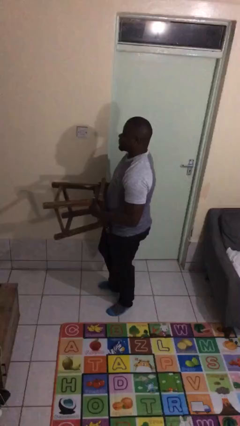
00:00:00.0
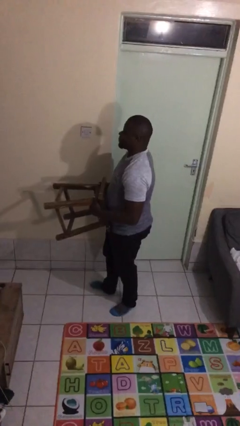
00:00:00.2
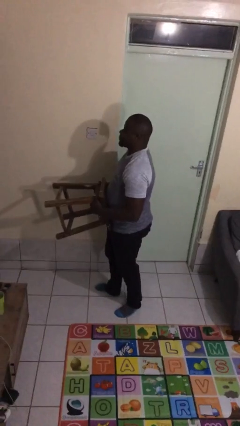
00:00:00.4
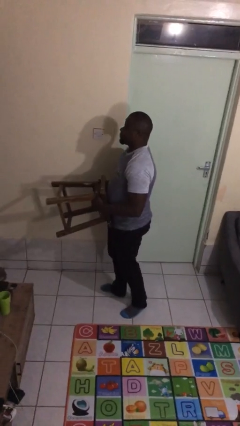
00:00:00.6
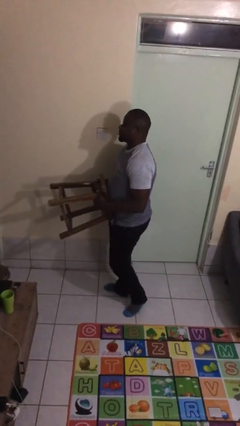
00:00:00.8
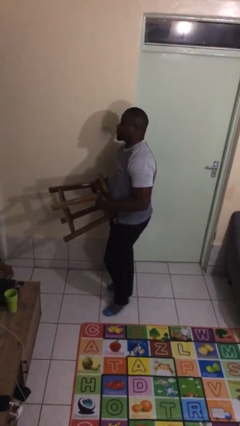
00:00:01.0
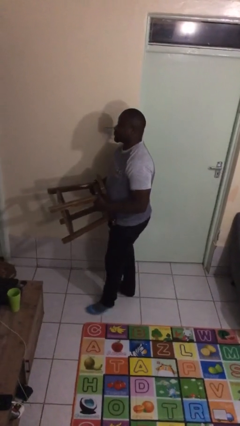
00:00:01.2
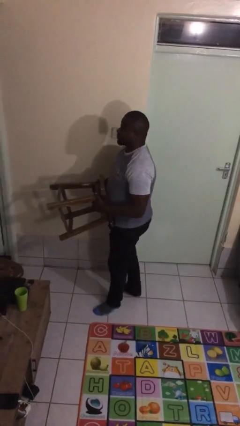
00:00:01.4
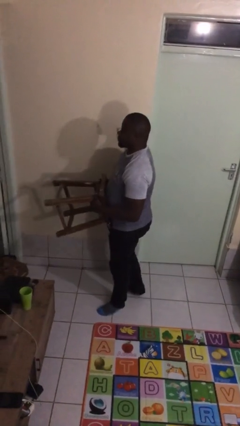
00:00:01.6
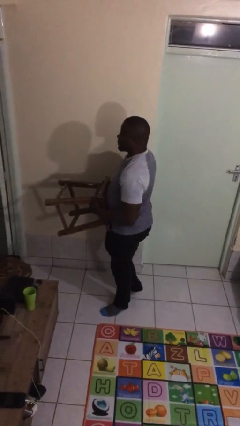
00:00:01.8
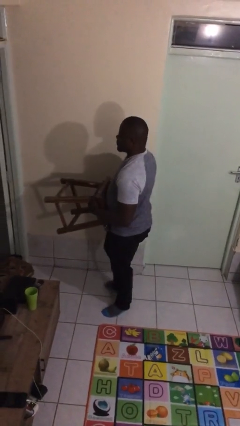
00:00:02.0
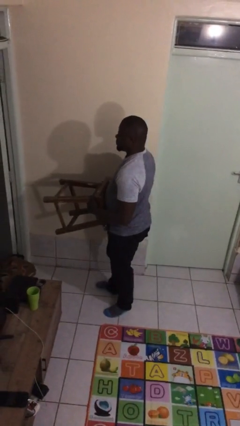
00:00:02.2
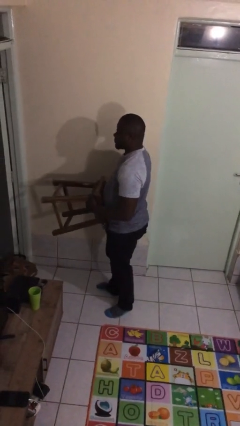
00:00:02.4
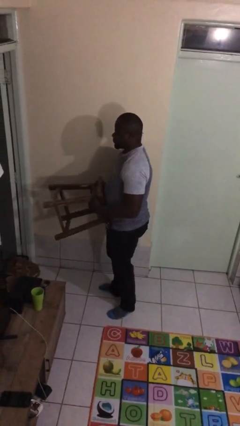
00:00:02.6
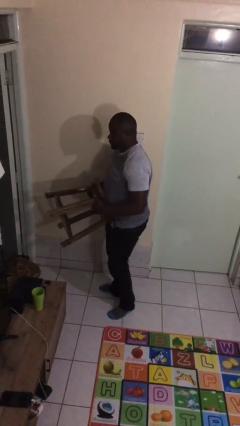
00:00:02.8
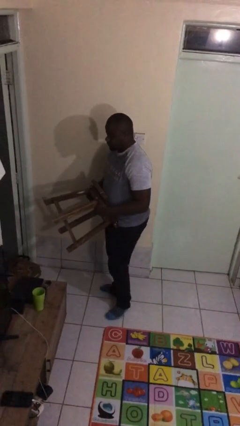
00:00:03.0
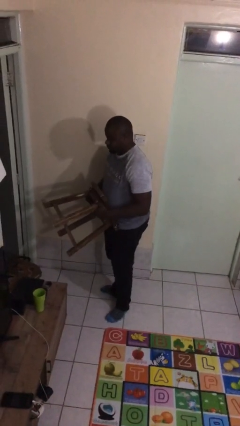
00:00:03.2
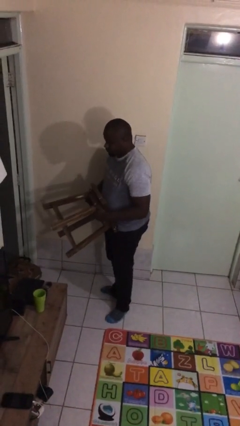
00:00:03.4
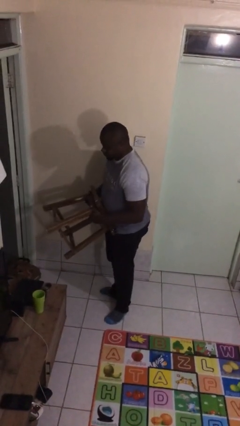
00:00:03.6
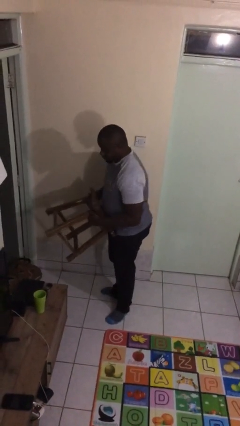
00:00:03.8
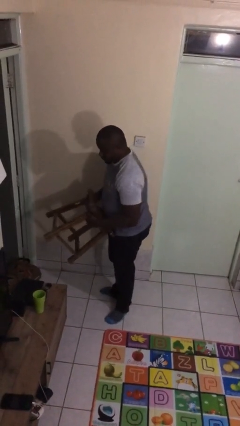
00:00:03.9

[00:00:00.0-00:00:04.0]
person carries furniture

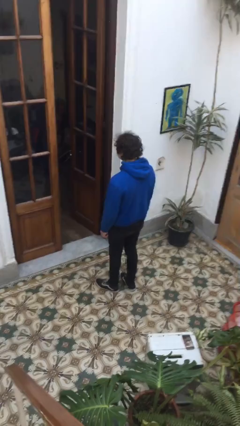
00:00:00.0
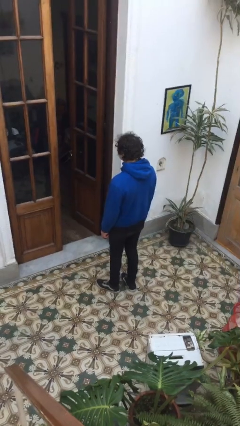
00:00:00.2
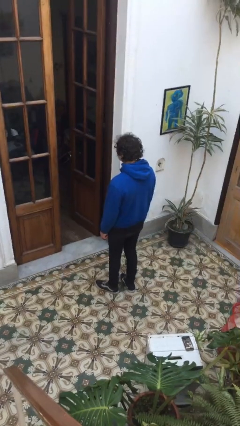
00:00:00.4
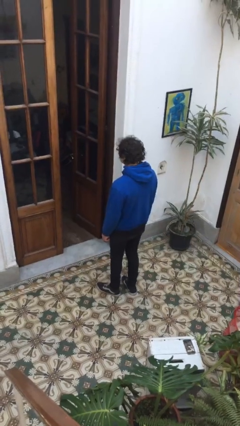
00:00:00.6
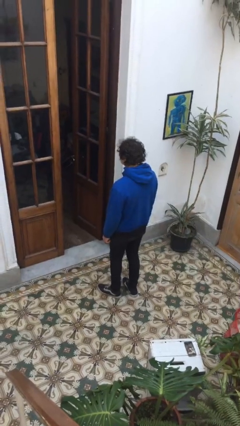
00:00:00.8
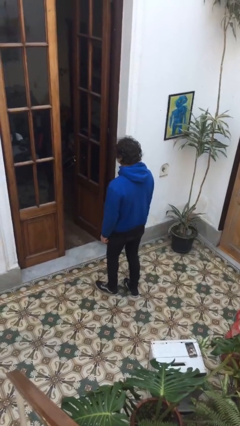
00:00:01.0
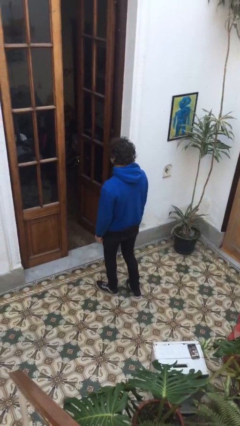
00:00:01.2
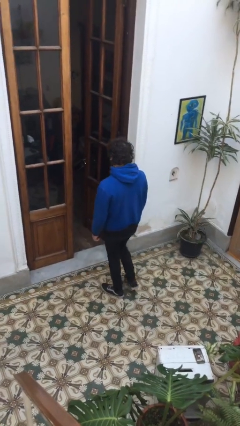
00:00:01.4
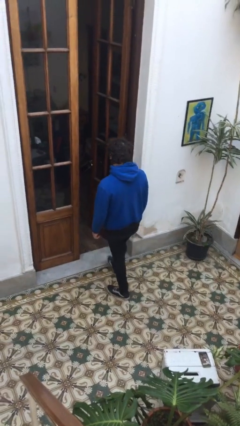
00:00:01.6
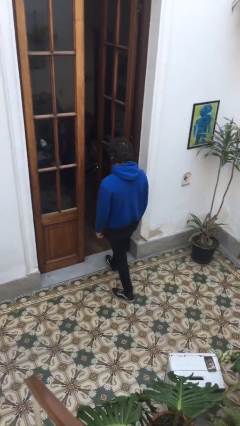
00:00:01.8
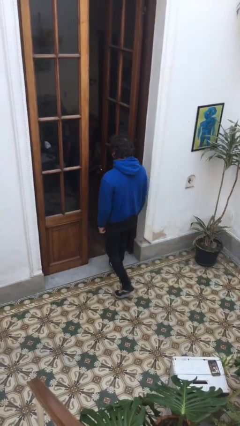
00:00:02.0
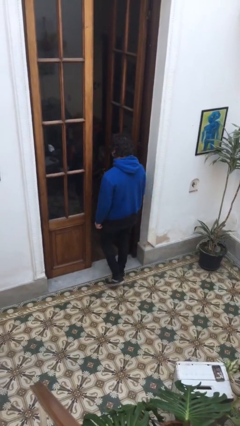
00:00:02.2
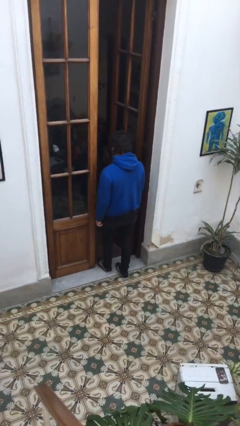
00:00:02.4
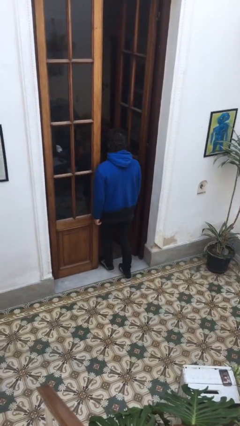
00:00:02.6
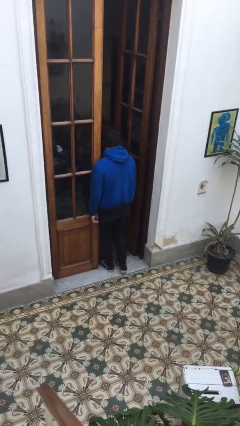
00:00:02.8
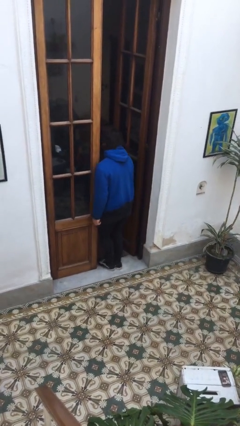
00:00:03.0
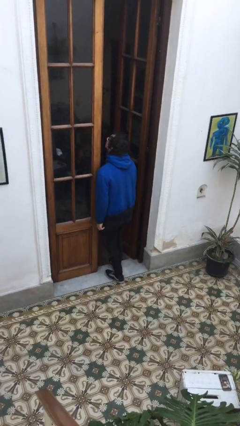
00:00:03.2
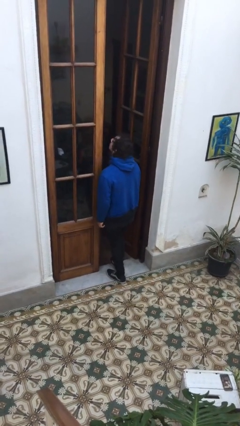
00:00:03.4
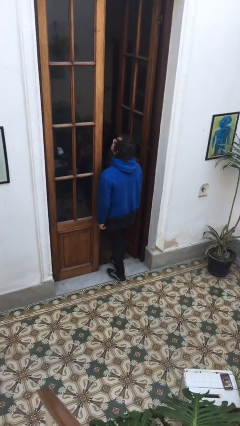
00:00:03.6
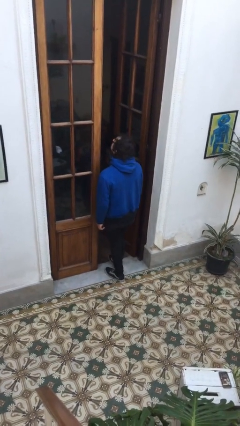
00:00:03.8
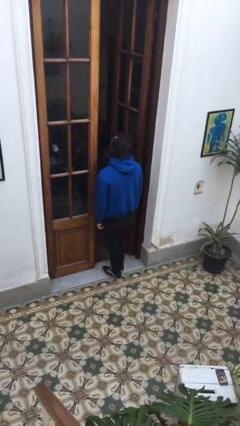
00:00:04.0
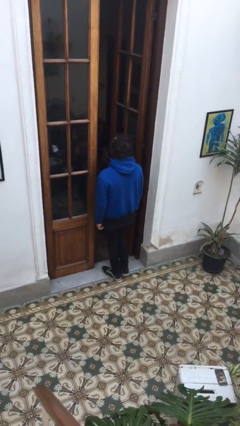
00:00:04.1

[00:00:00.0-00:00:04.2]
person bumps into wall

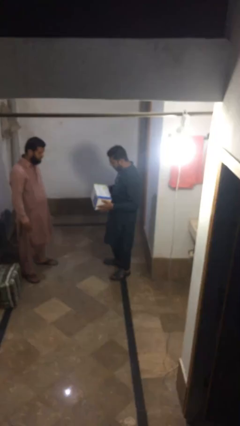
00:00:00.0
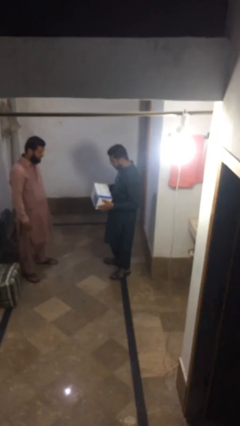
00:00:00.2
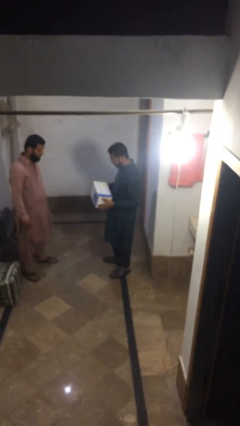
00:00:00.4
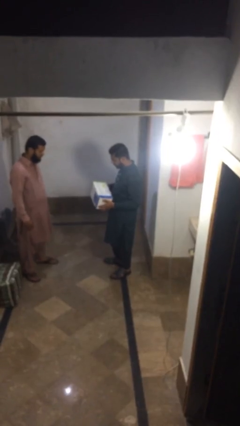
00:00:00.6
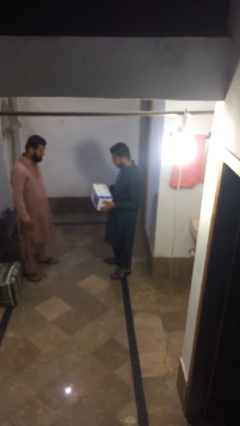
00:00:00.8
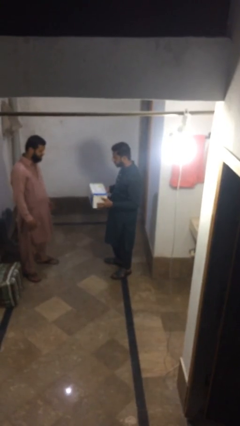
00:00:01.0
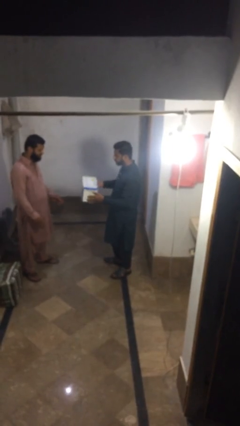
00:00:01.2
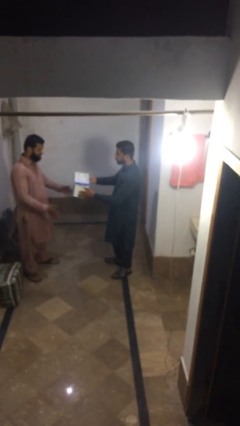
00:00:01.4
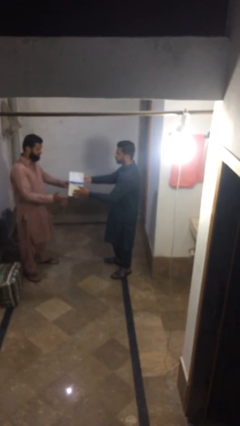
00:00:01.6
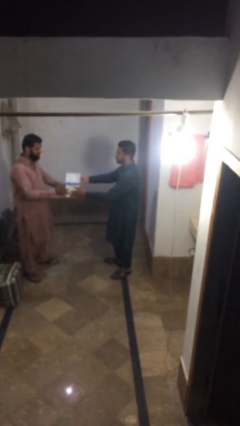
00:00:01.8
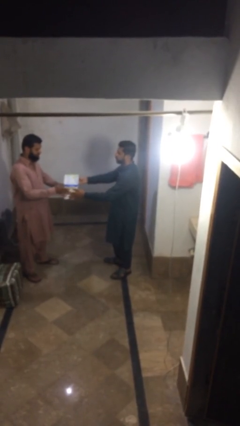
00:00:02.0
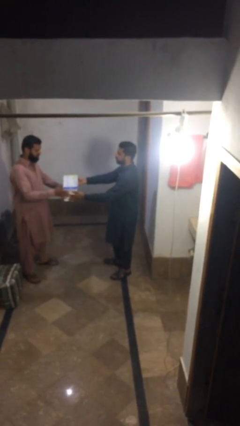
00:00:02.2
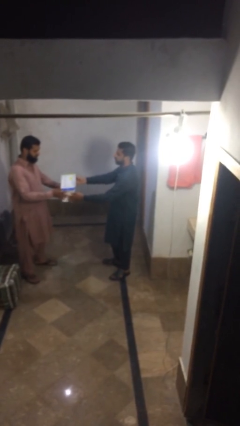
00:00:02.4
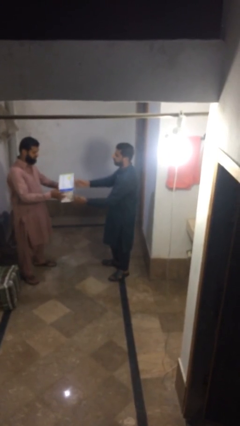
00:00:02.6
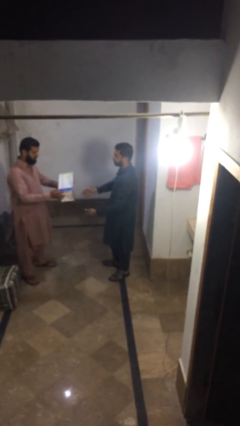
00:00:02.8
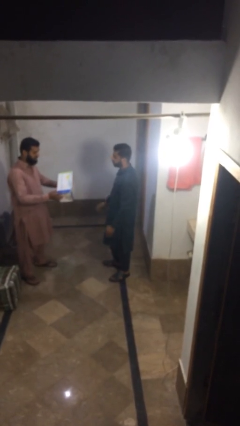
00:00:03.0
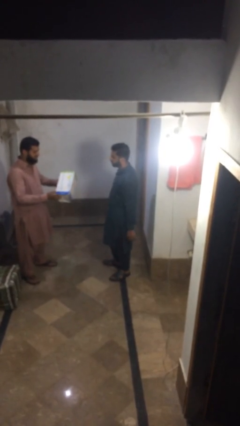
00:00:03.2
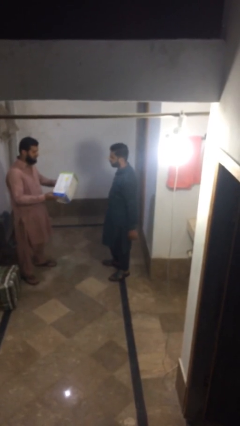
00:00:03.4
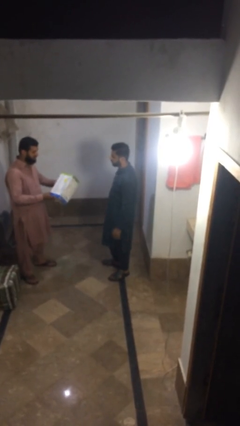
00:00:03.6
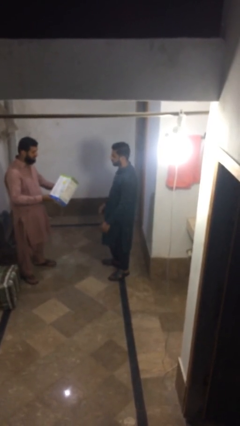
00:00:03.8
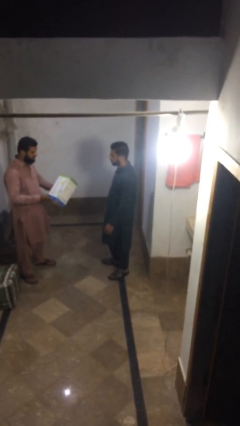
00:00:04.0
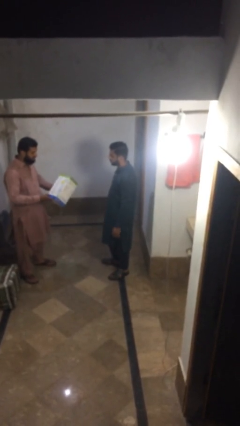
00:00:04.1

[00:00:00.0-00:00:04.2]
person transfers object to person

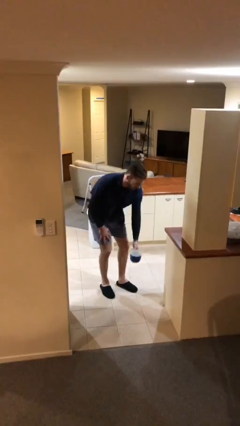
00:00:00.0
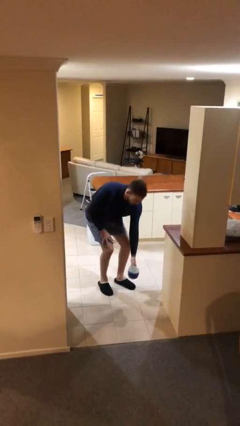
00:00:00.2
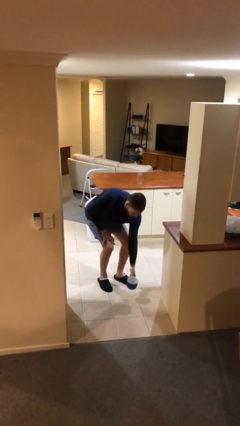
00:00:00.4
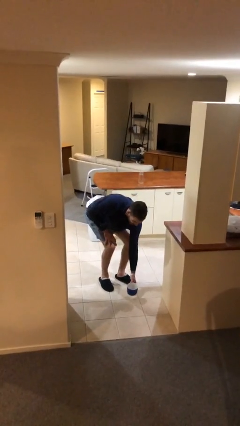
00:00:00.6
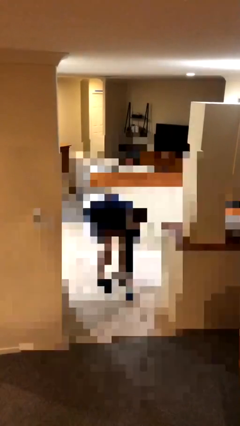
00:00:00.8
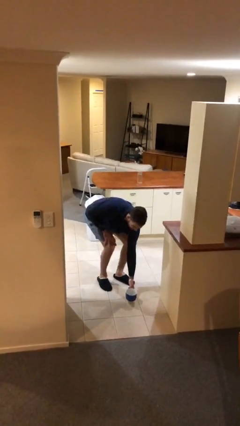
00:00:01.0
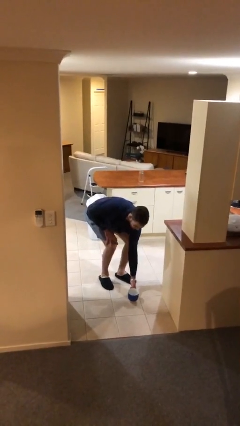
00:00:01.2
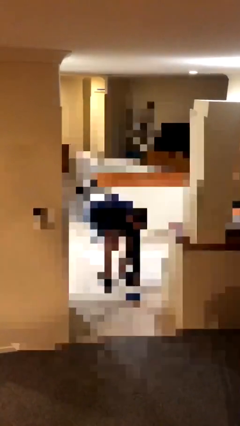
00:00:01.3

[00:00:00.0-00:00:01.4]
person puts down object on floor

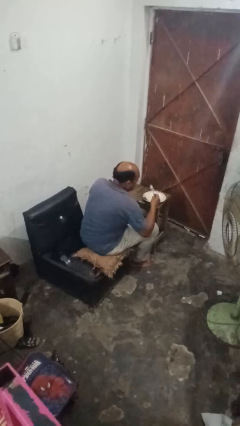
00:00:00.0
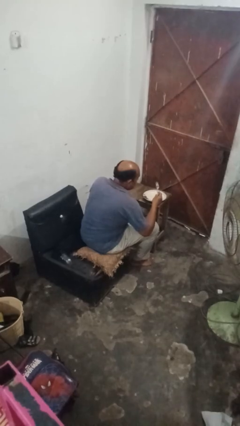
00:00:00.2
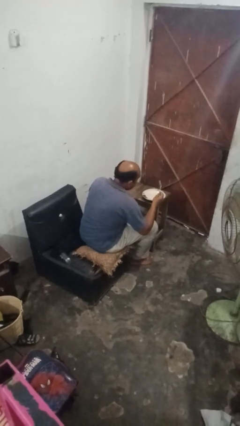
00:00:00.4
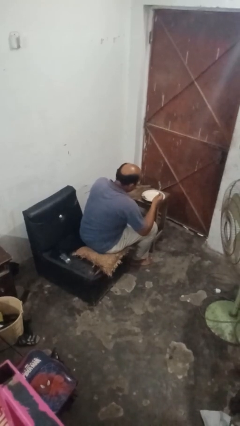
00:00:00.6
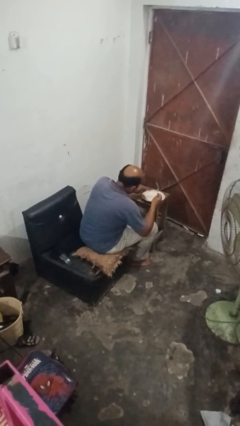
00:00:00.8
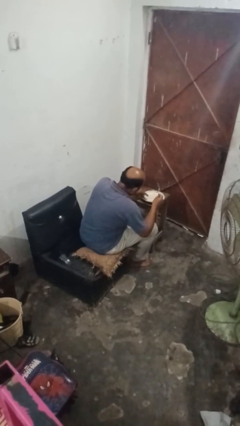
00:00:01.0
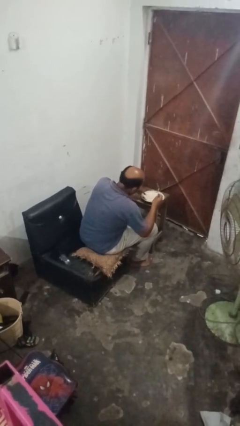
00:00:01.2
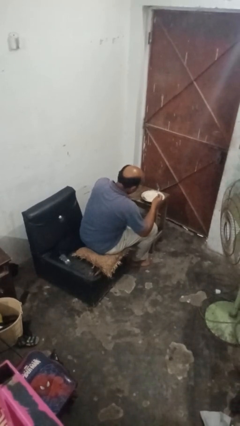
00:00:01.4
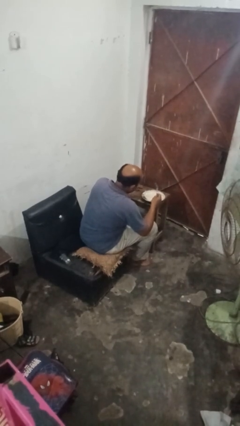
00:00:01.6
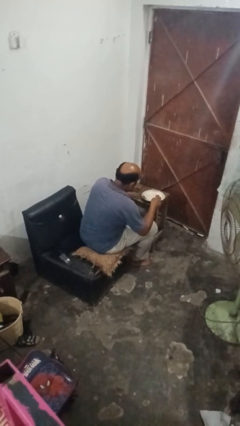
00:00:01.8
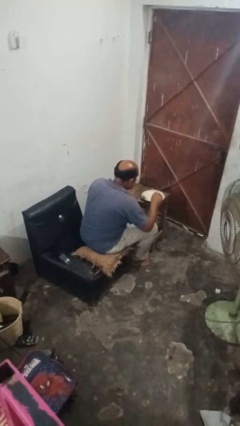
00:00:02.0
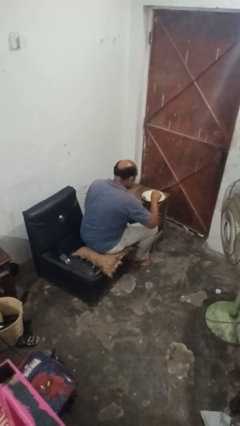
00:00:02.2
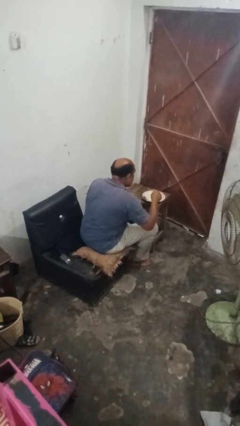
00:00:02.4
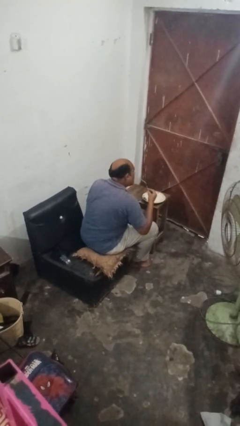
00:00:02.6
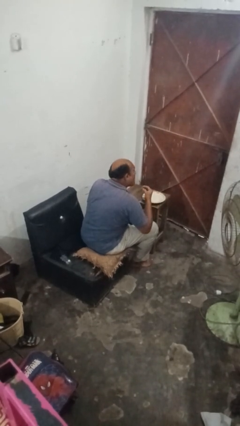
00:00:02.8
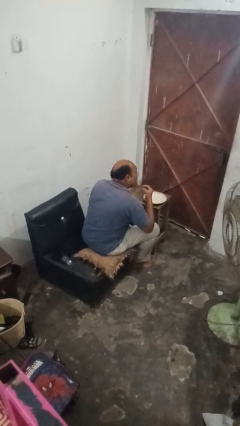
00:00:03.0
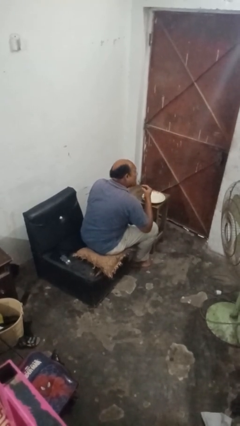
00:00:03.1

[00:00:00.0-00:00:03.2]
person eats with utensil
